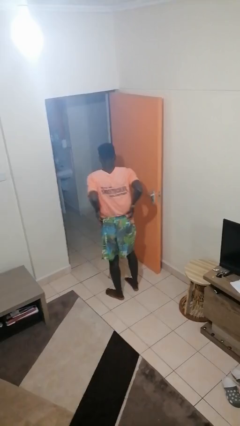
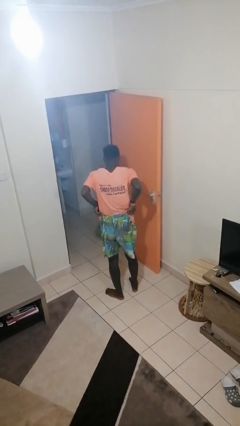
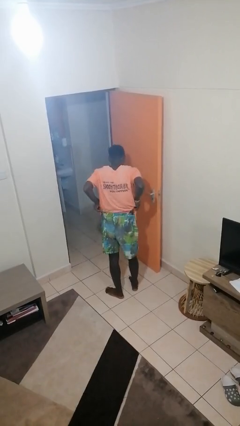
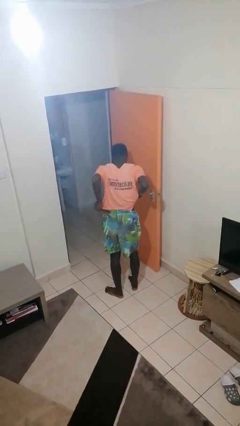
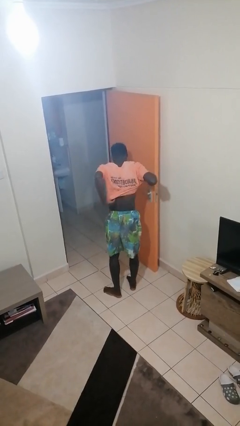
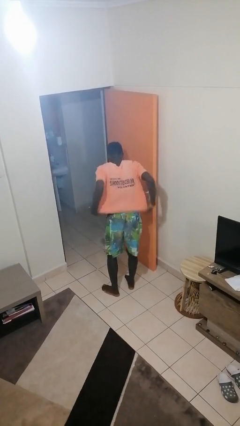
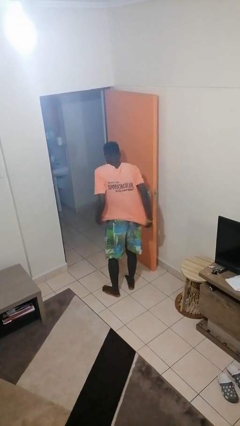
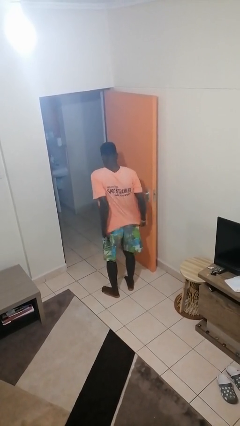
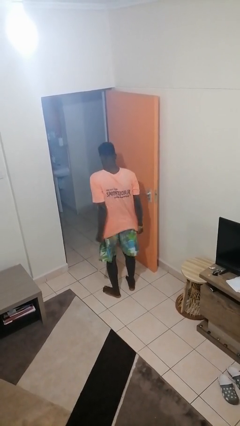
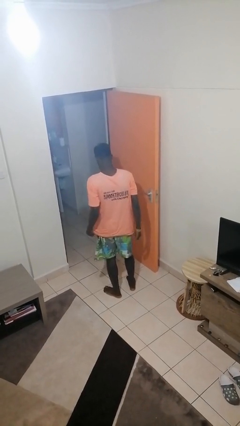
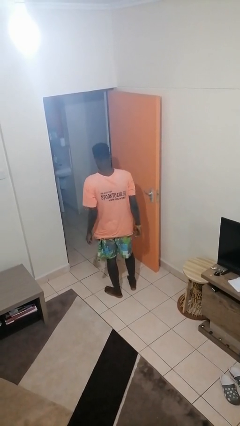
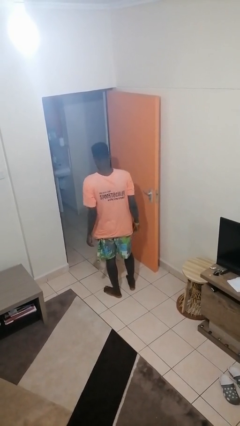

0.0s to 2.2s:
person untucks shirt

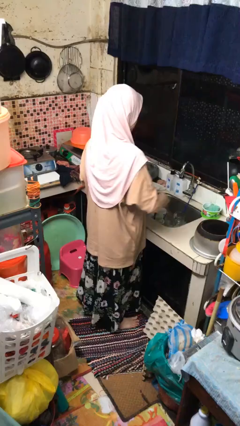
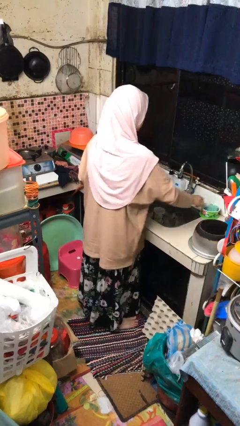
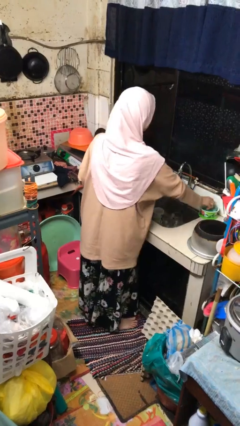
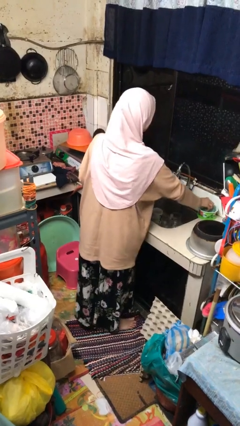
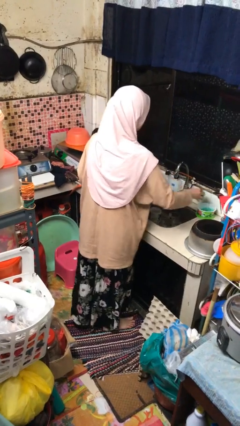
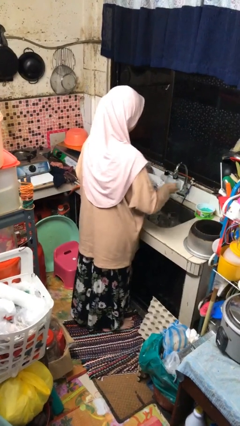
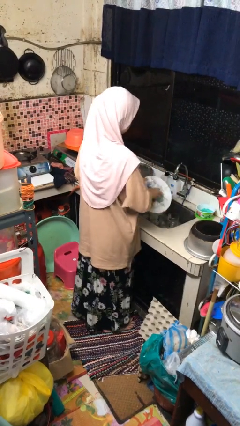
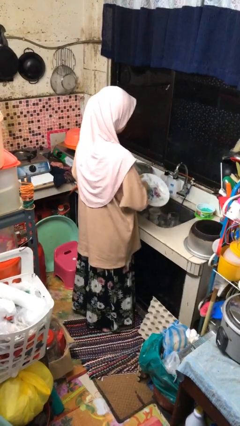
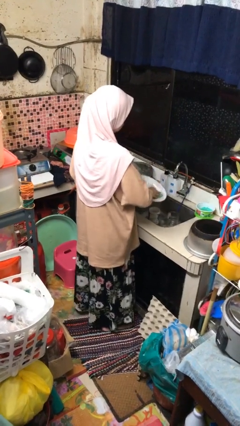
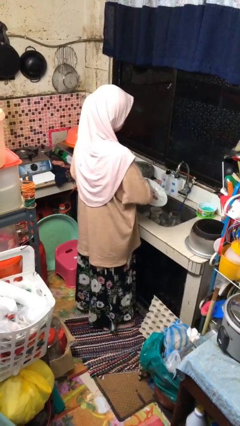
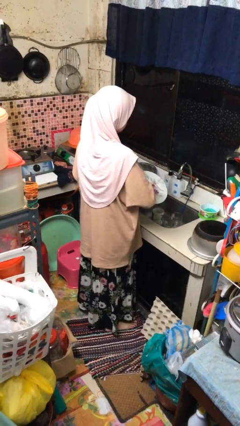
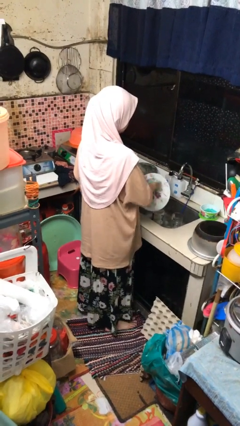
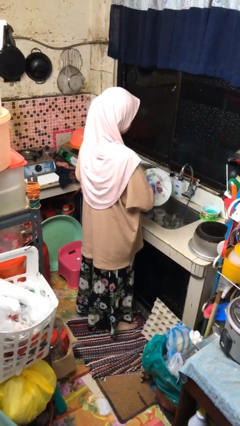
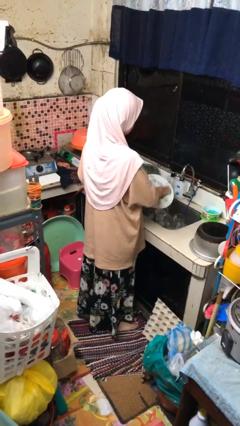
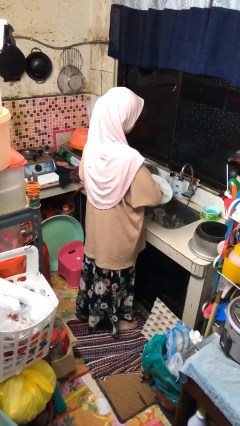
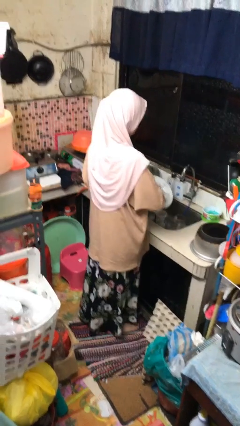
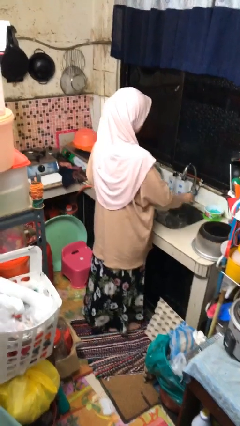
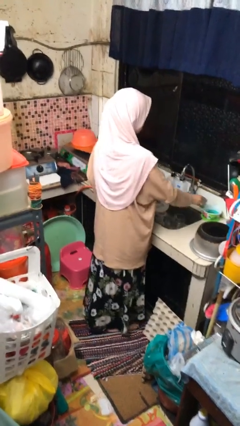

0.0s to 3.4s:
person washes dish

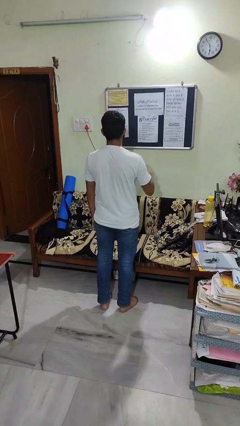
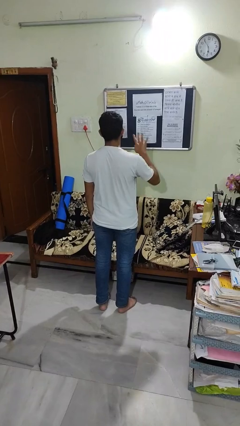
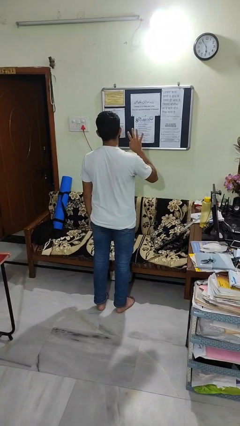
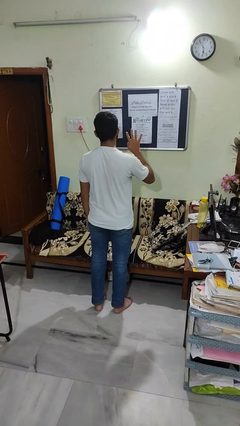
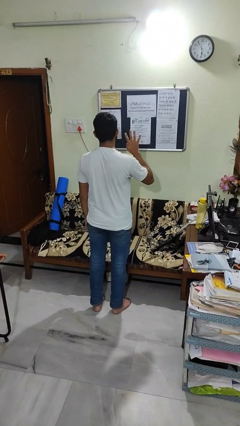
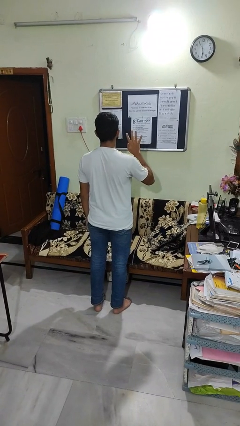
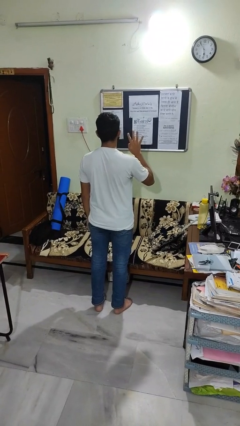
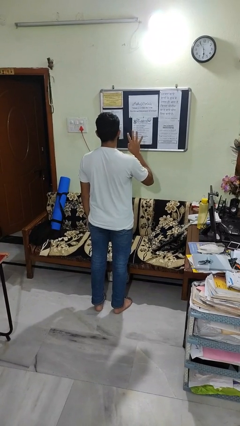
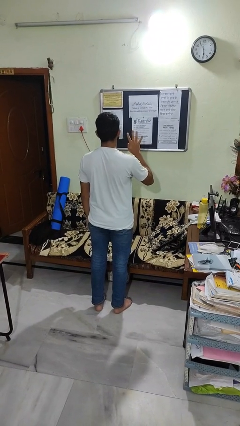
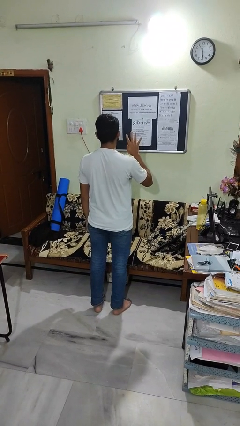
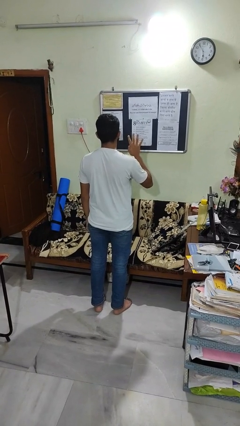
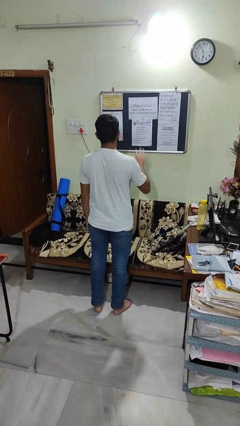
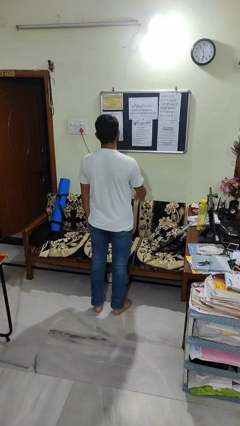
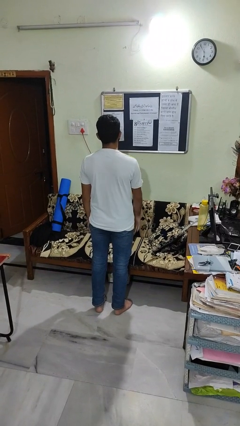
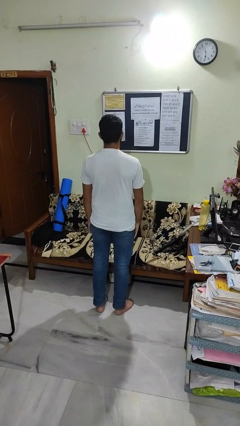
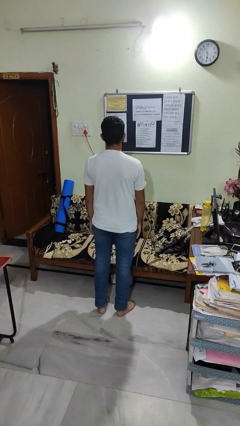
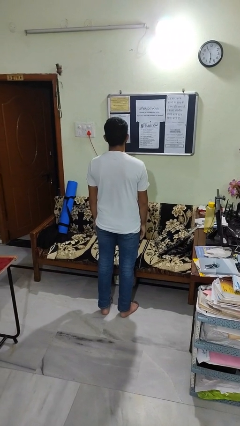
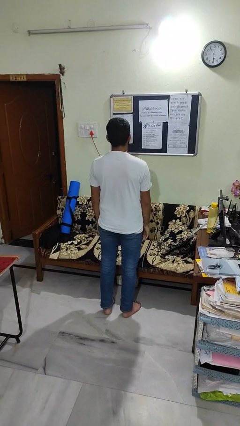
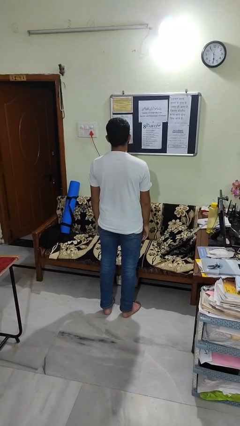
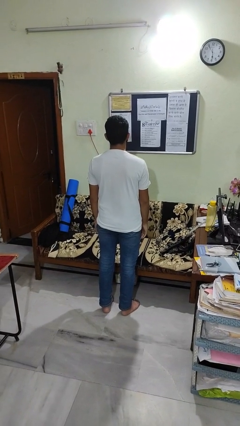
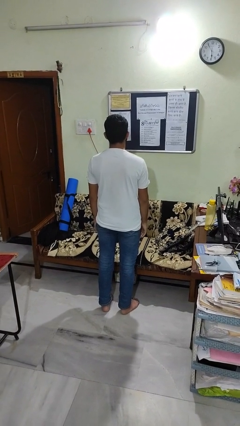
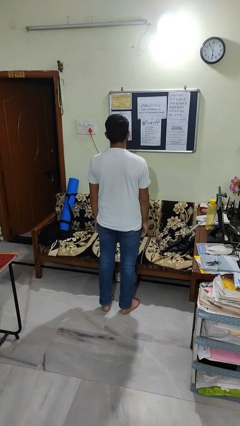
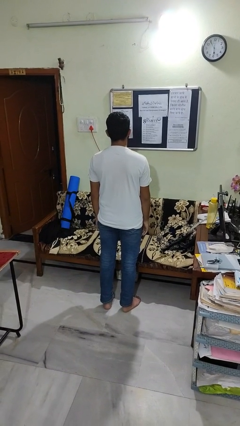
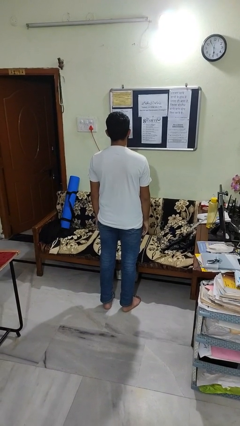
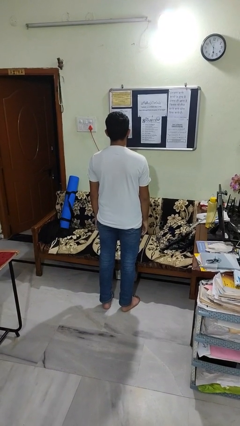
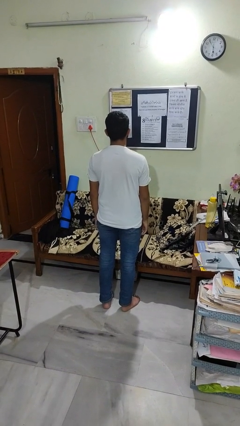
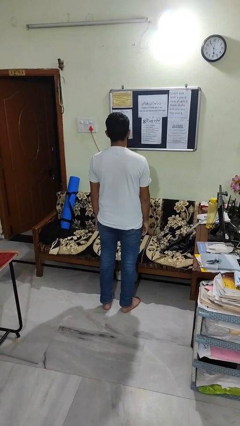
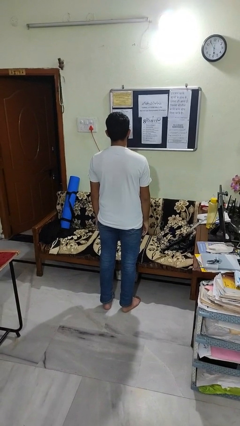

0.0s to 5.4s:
person gestures number four

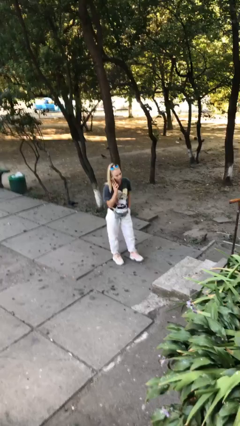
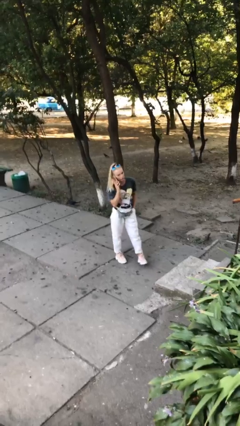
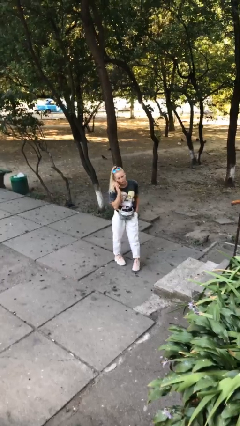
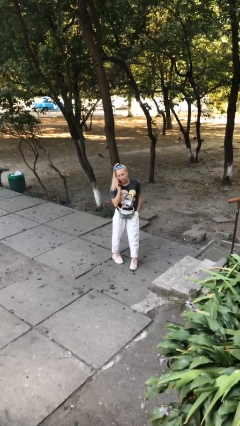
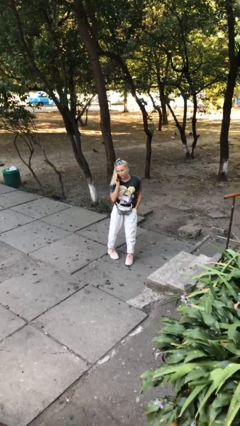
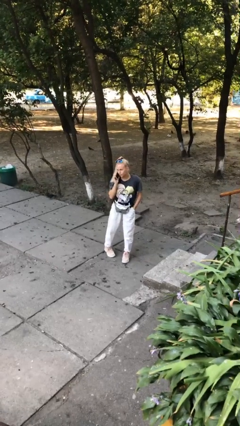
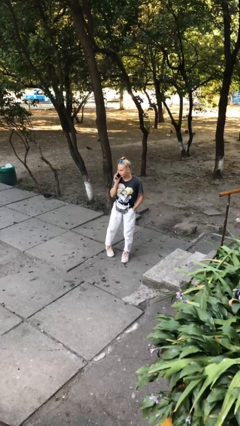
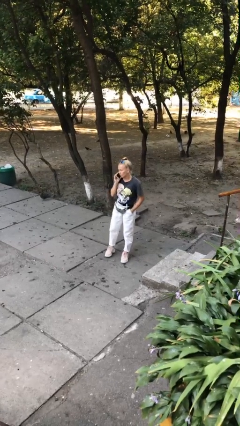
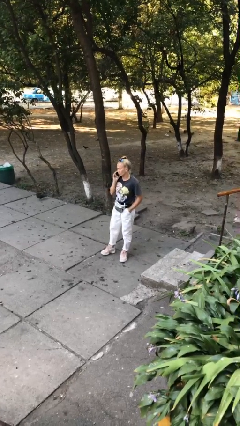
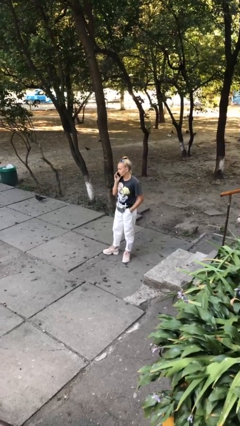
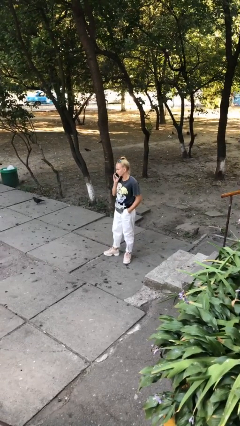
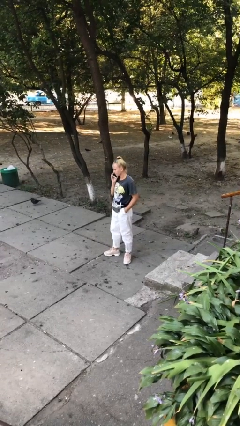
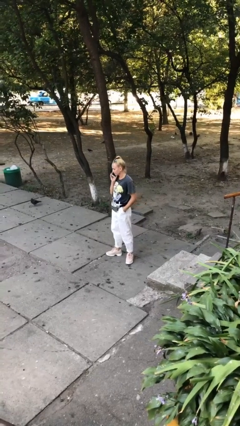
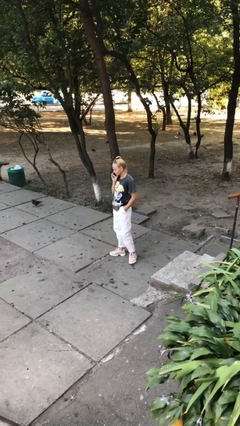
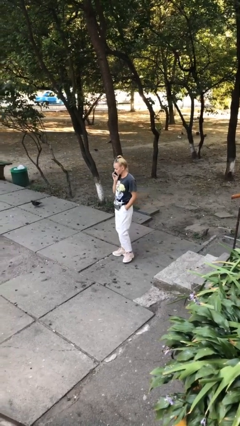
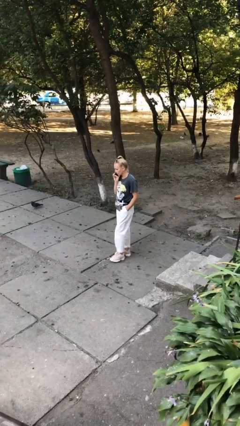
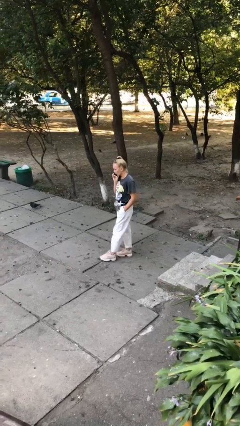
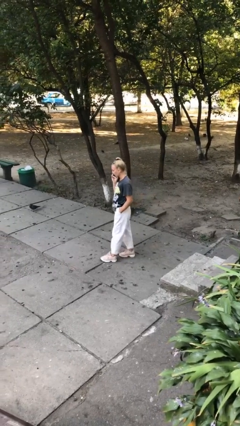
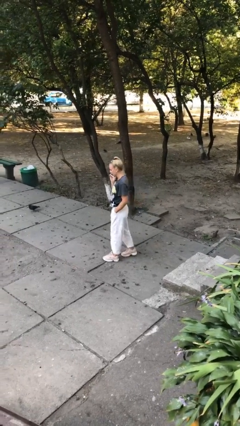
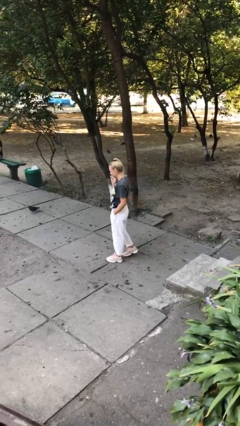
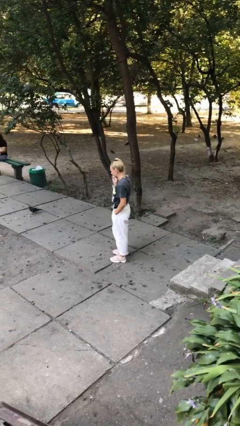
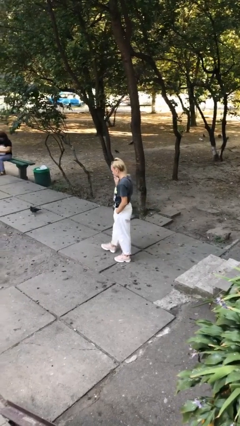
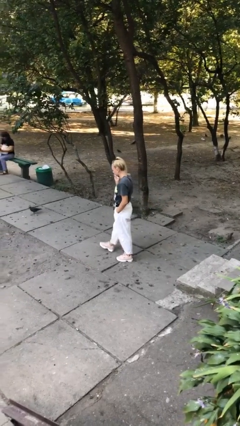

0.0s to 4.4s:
person talks on phone

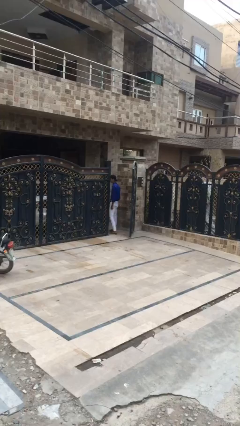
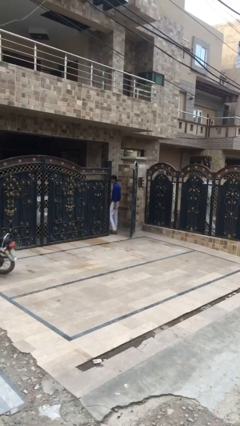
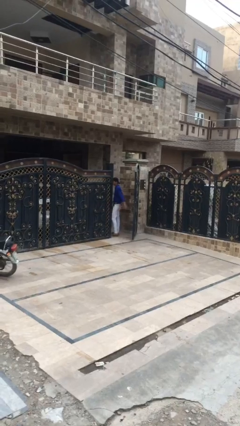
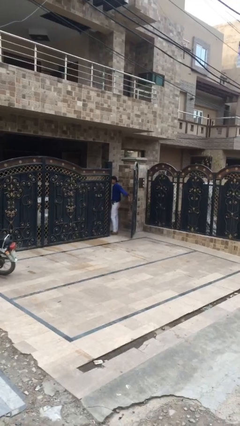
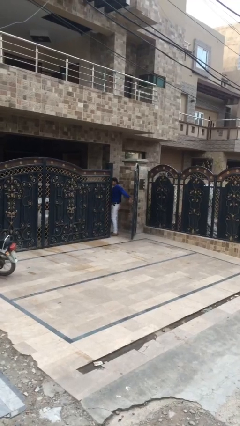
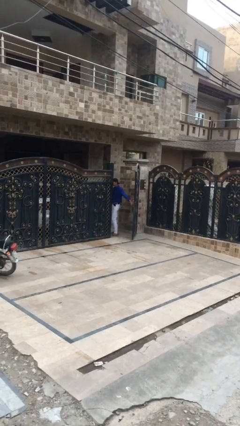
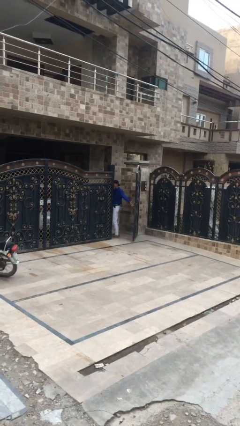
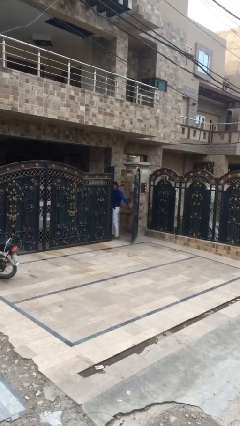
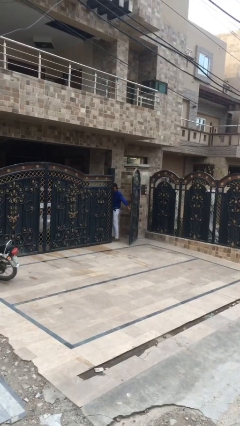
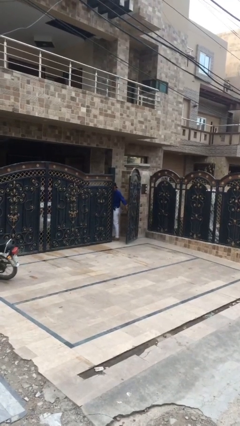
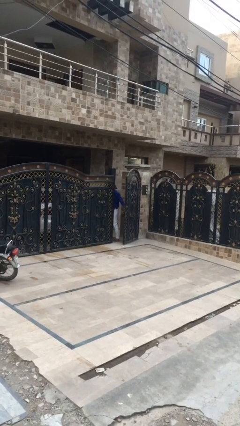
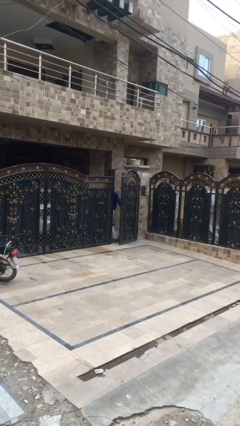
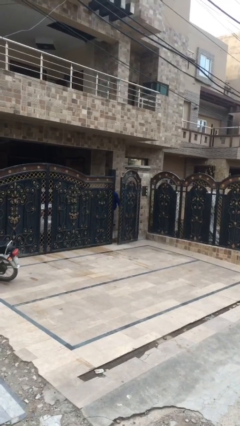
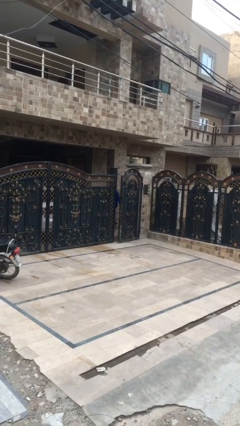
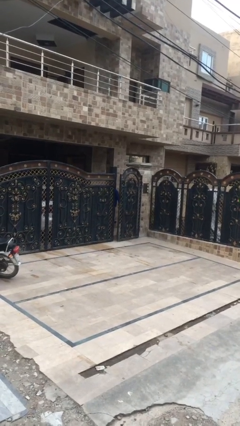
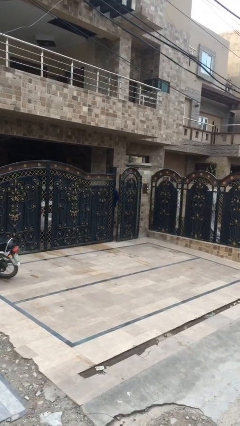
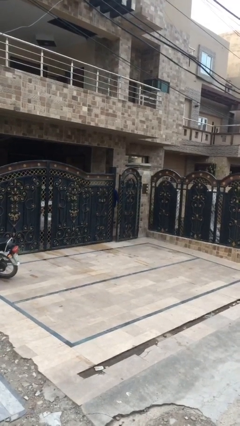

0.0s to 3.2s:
person closes facility door
